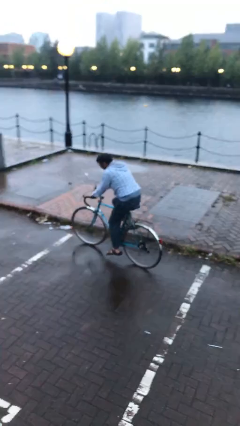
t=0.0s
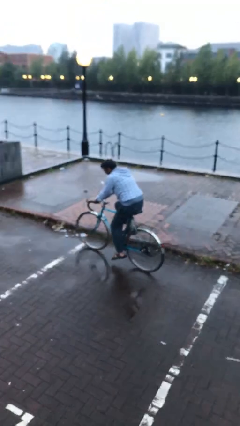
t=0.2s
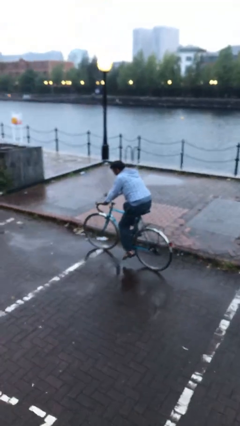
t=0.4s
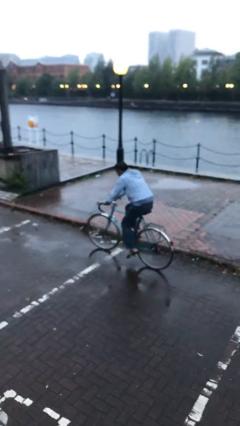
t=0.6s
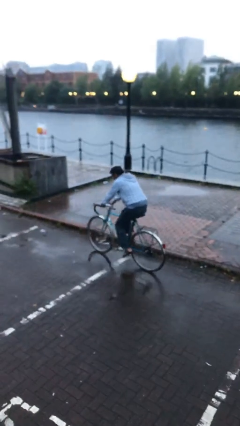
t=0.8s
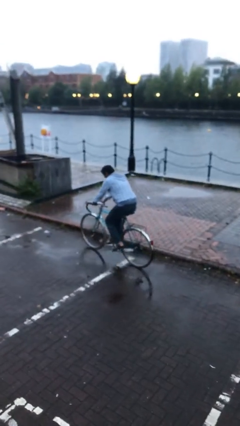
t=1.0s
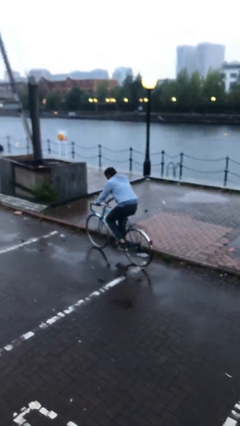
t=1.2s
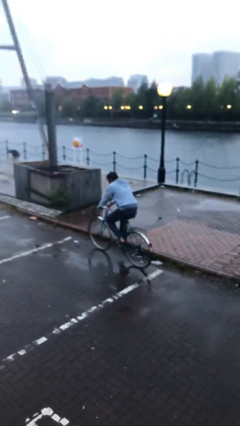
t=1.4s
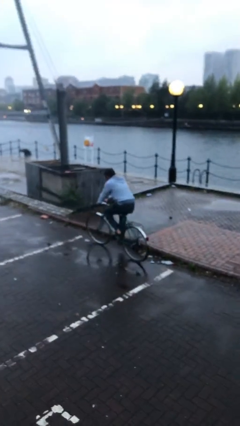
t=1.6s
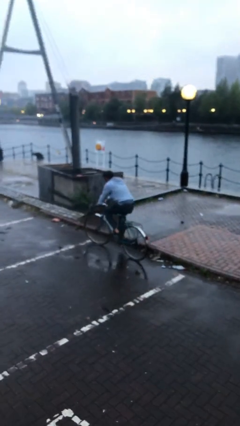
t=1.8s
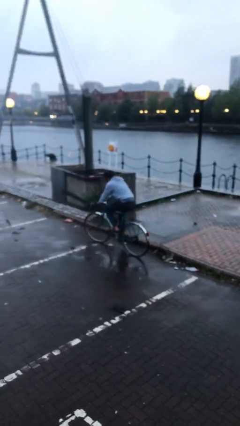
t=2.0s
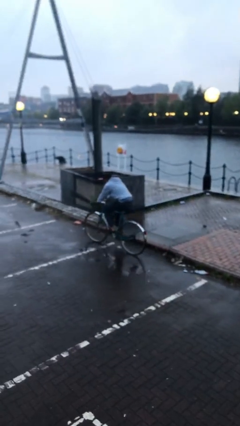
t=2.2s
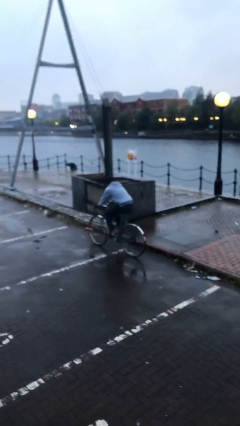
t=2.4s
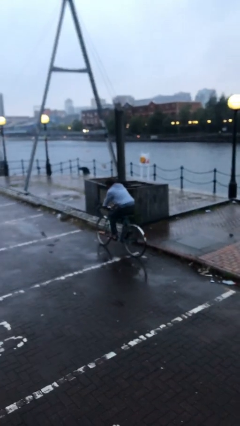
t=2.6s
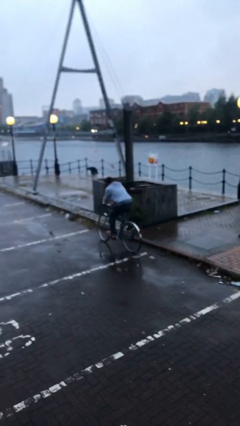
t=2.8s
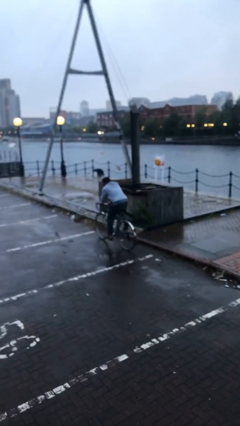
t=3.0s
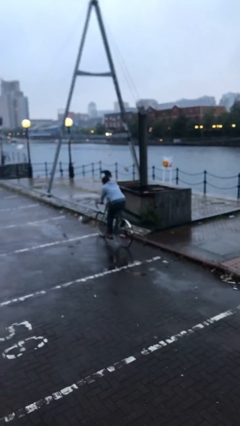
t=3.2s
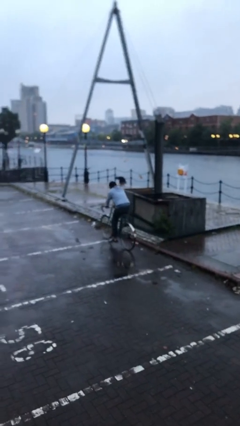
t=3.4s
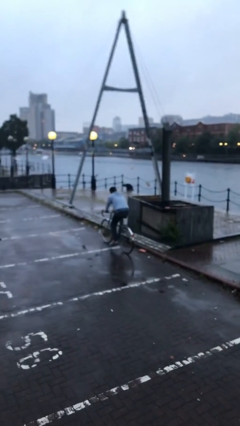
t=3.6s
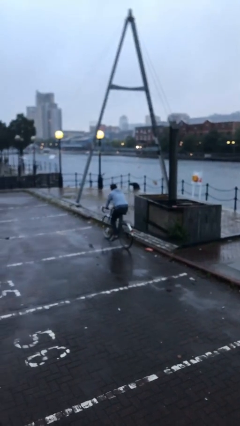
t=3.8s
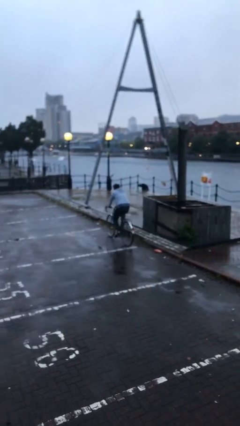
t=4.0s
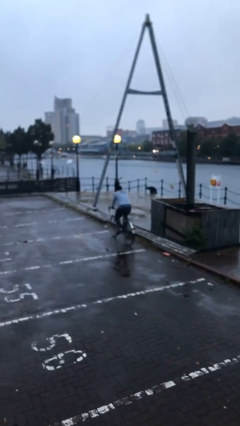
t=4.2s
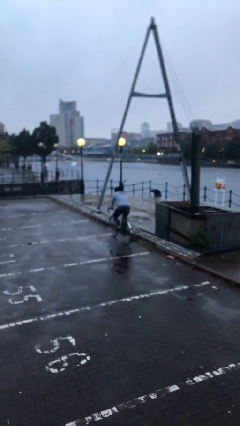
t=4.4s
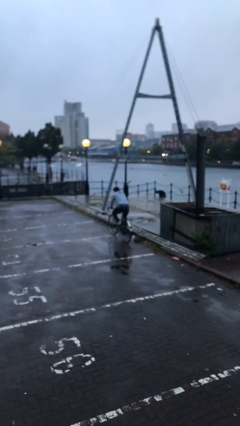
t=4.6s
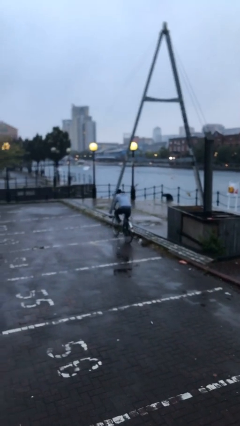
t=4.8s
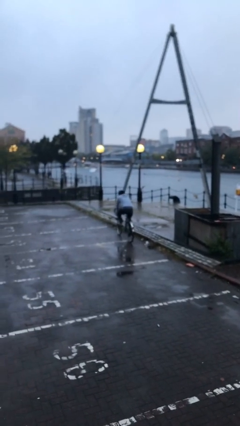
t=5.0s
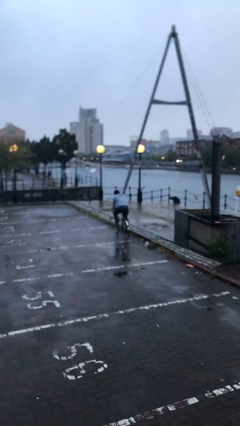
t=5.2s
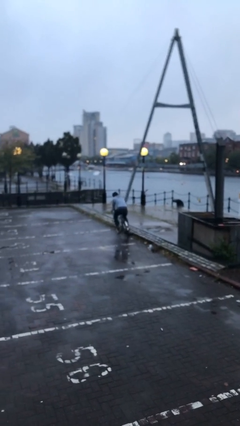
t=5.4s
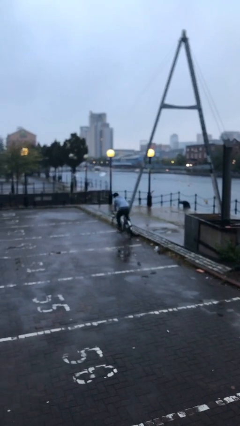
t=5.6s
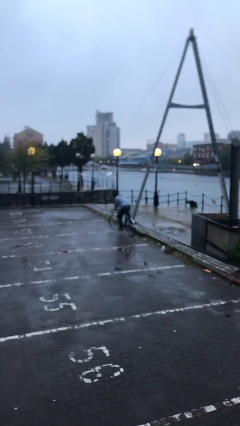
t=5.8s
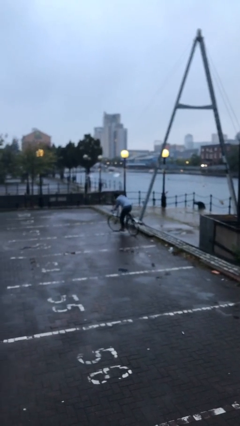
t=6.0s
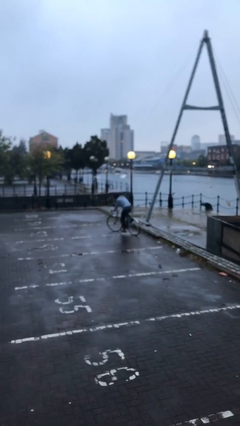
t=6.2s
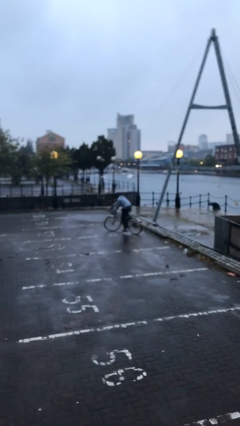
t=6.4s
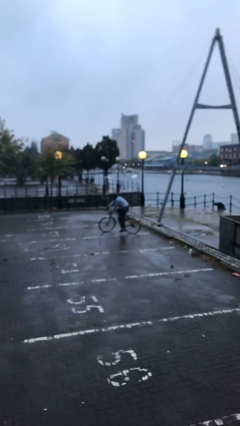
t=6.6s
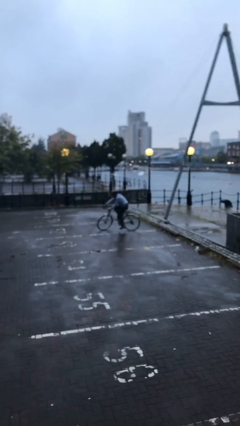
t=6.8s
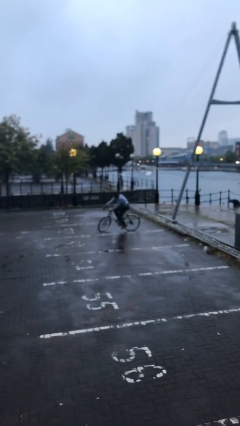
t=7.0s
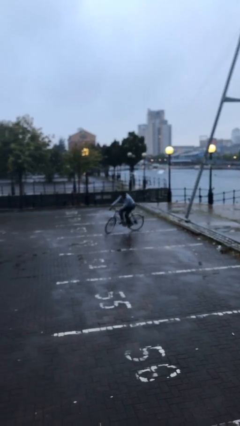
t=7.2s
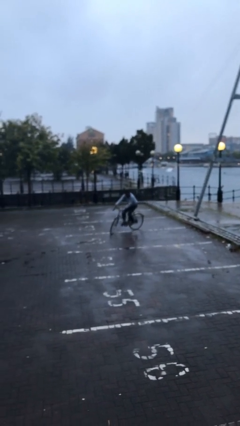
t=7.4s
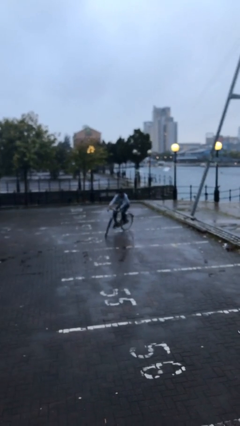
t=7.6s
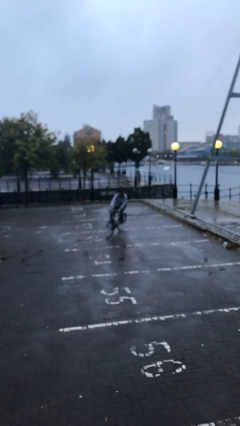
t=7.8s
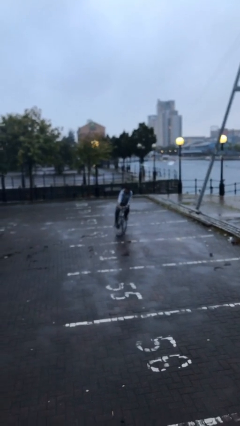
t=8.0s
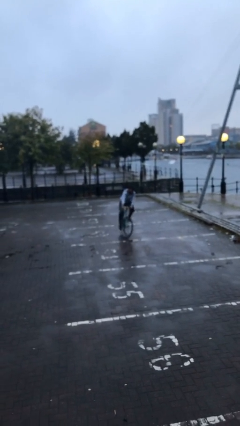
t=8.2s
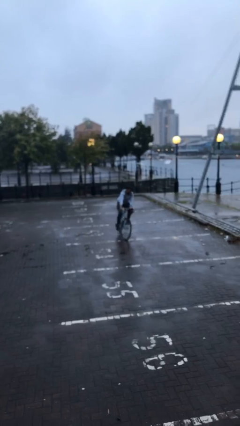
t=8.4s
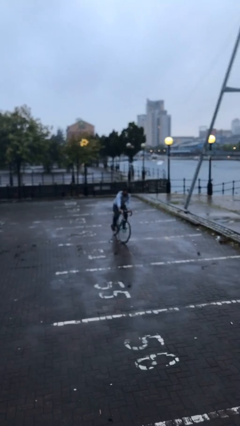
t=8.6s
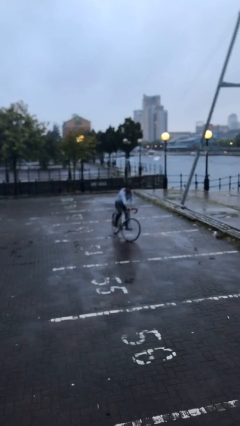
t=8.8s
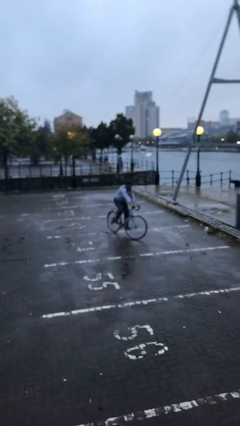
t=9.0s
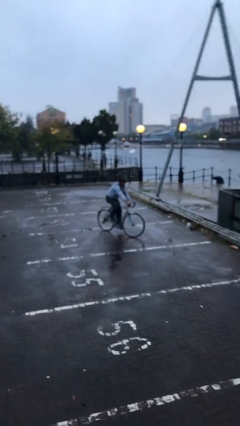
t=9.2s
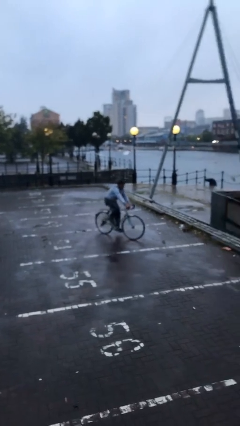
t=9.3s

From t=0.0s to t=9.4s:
person rides bicycle

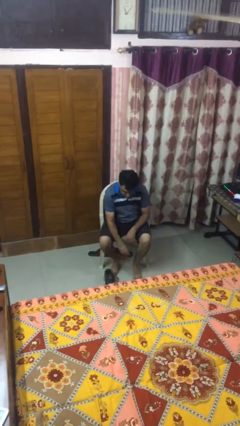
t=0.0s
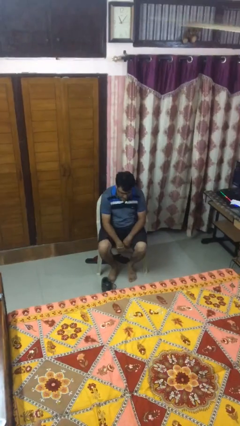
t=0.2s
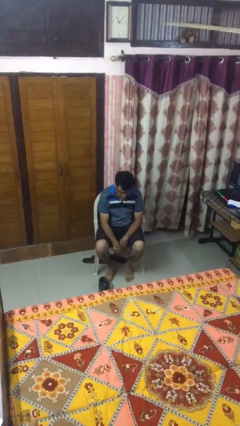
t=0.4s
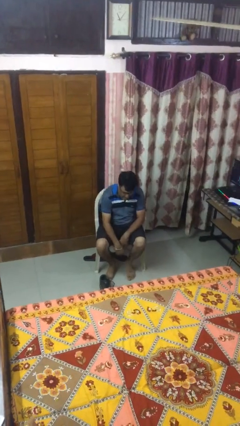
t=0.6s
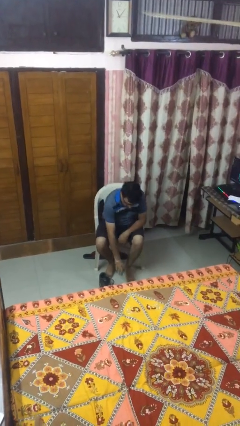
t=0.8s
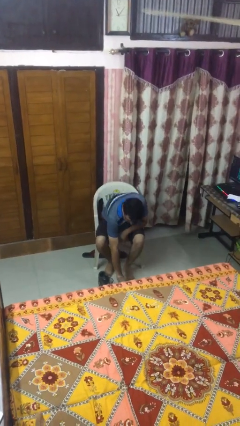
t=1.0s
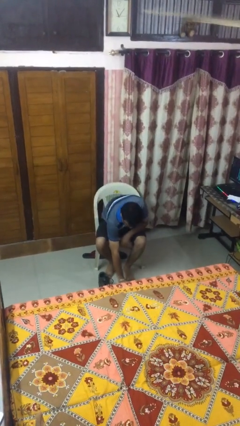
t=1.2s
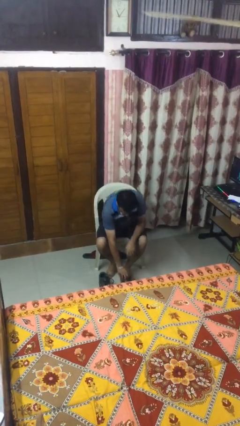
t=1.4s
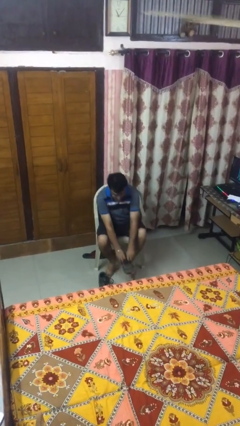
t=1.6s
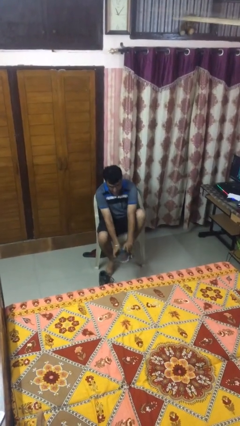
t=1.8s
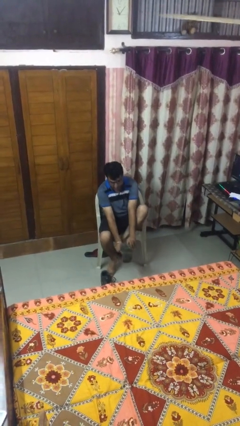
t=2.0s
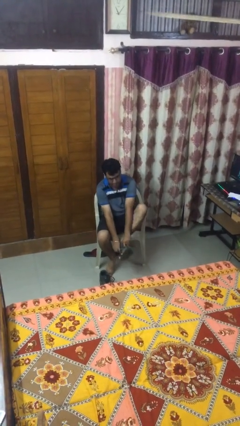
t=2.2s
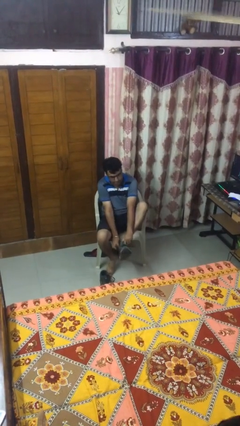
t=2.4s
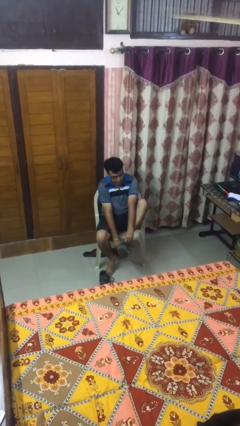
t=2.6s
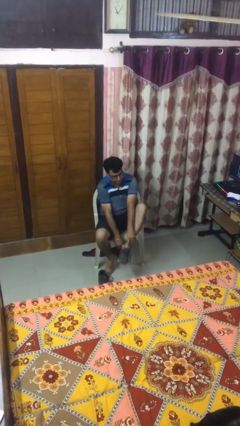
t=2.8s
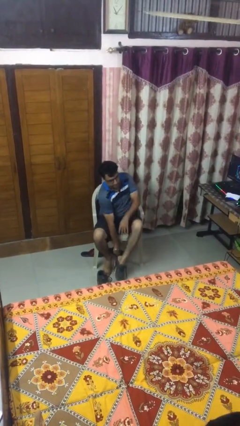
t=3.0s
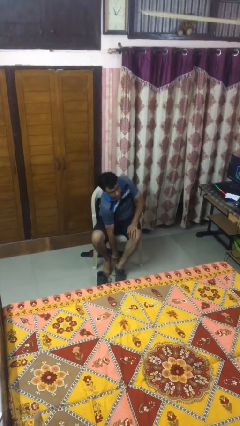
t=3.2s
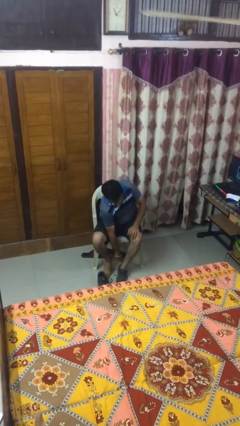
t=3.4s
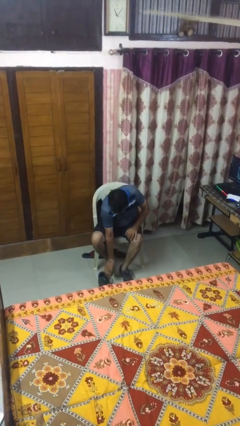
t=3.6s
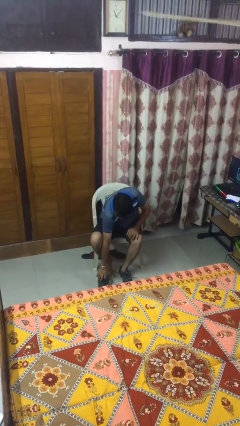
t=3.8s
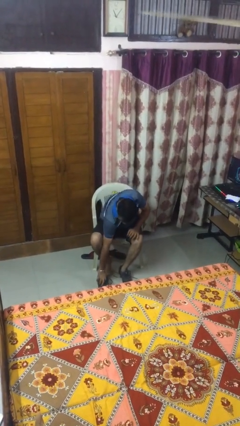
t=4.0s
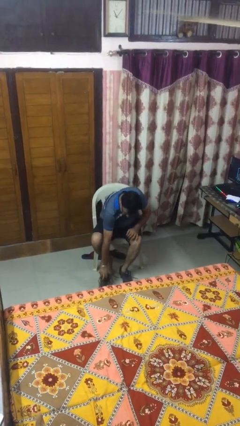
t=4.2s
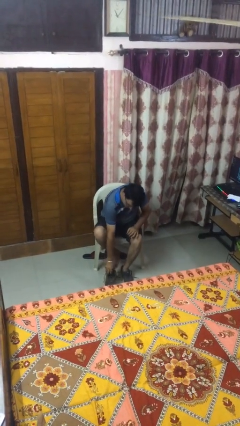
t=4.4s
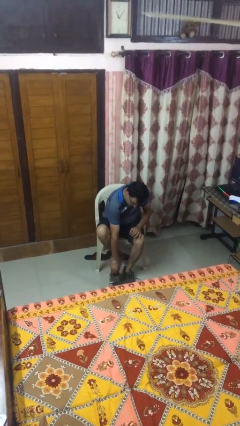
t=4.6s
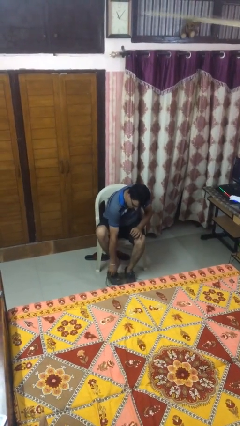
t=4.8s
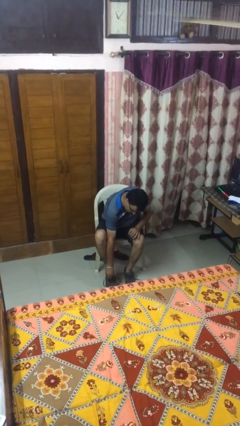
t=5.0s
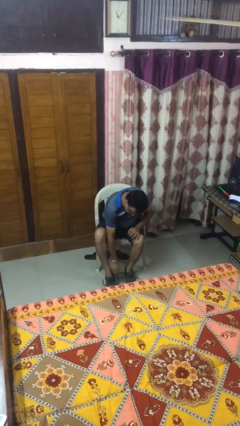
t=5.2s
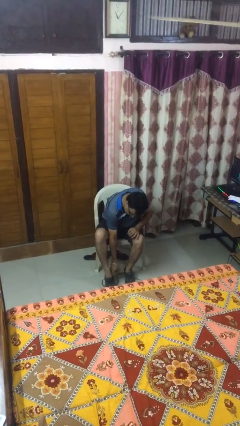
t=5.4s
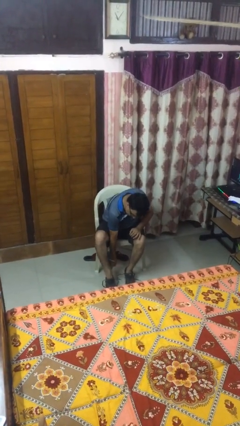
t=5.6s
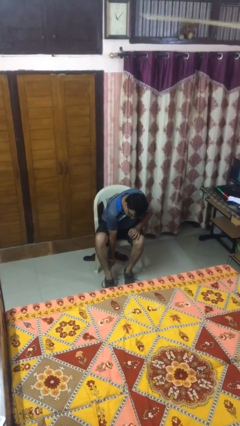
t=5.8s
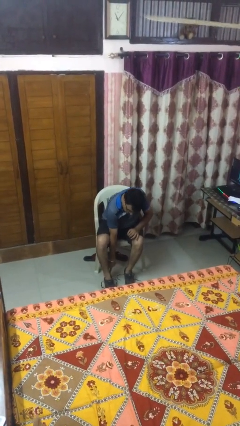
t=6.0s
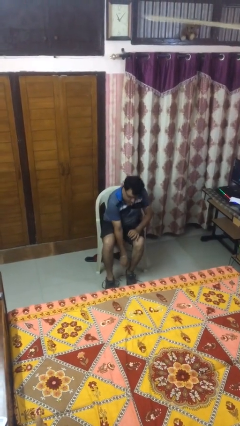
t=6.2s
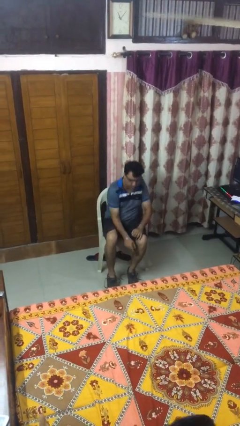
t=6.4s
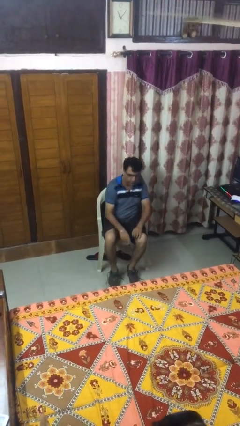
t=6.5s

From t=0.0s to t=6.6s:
person puts on shoes

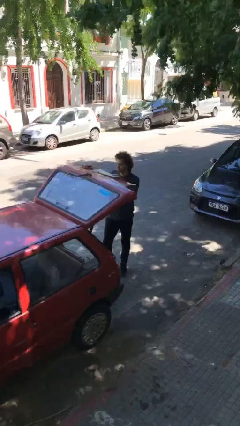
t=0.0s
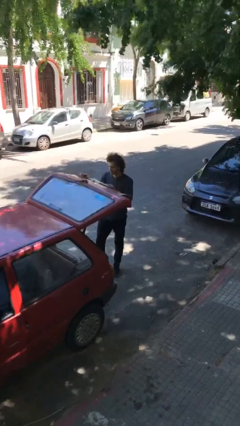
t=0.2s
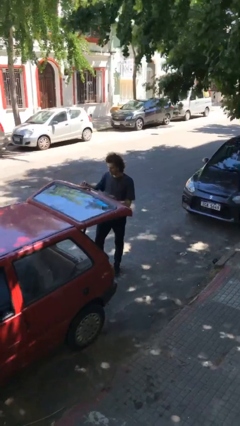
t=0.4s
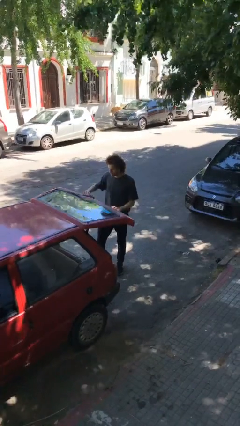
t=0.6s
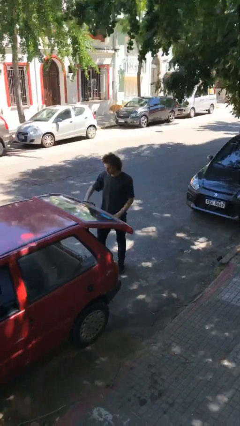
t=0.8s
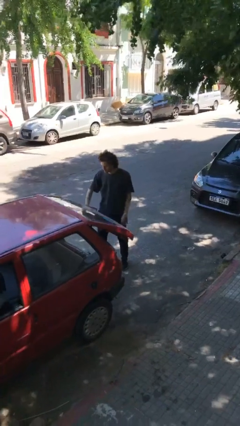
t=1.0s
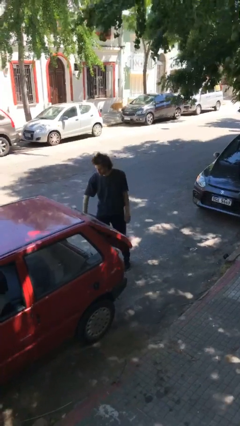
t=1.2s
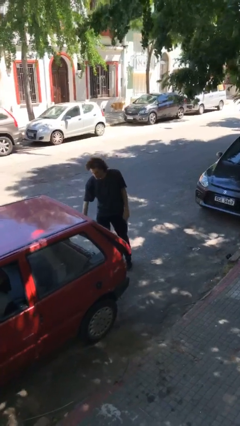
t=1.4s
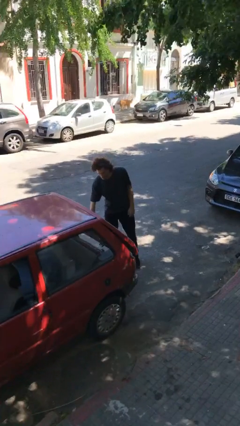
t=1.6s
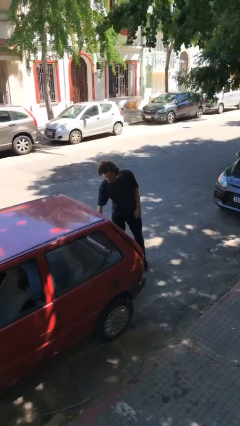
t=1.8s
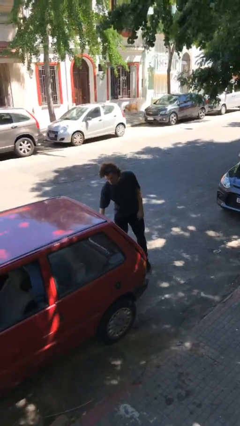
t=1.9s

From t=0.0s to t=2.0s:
person closes car trunk

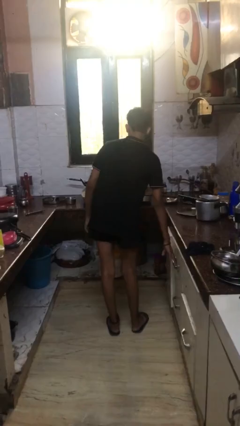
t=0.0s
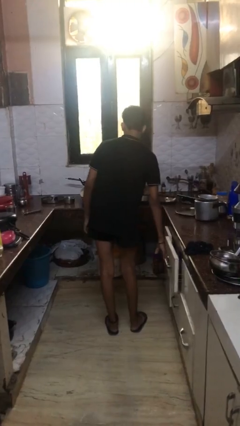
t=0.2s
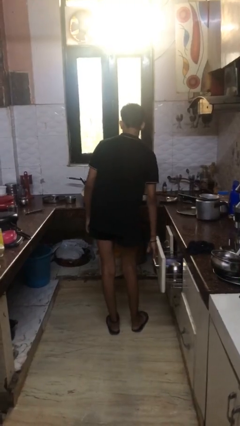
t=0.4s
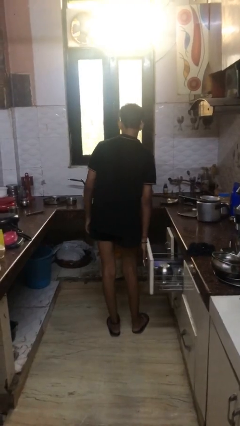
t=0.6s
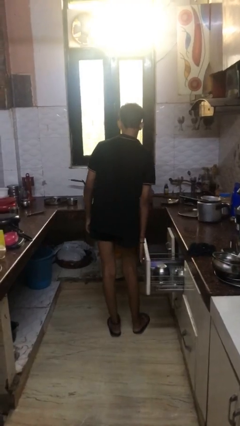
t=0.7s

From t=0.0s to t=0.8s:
person opens kitchen drawer
